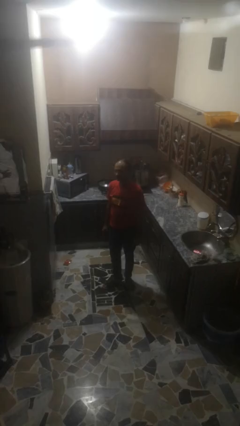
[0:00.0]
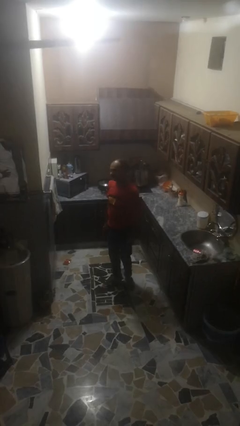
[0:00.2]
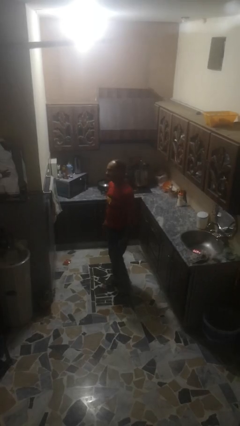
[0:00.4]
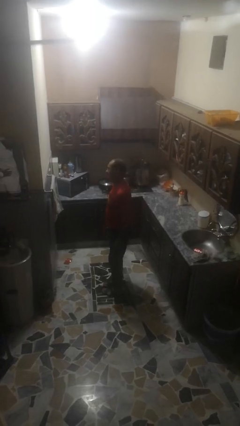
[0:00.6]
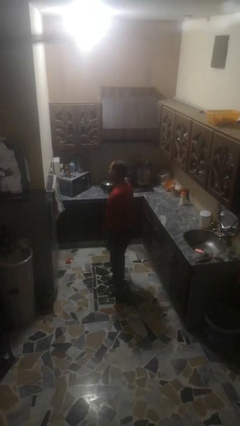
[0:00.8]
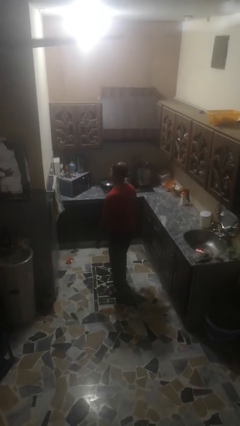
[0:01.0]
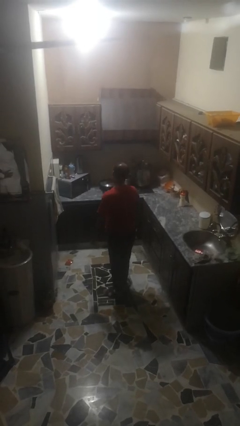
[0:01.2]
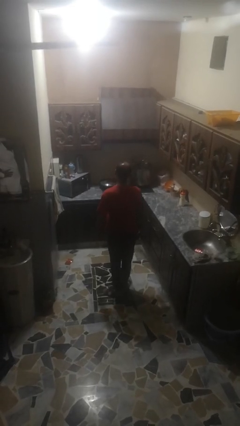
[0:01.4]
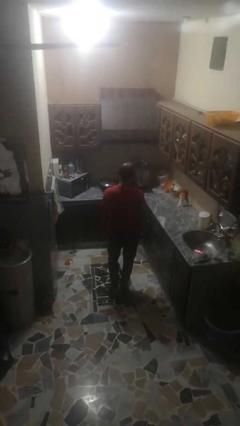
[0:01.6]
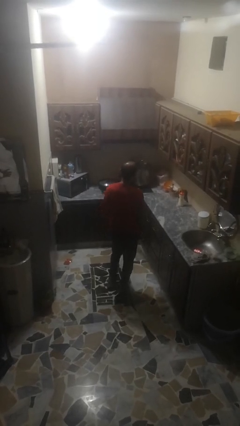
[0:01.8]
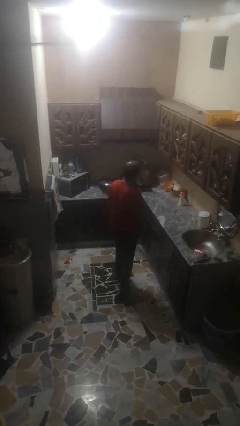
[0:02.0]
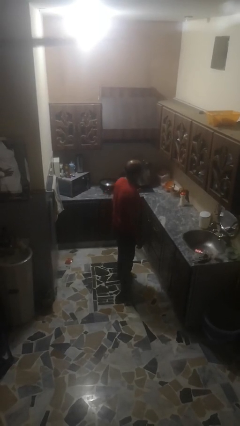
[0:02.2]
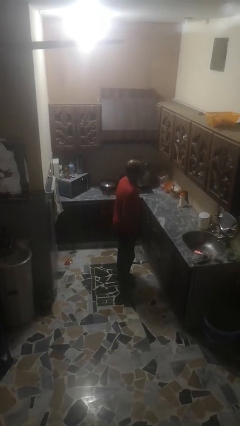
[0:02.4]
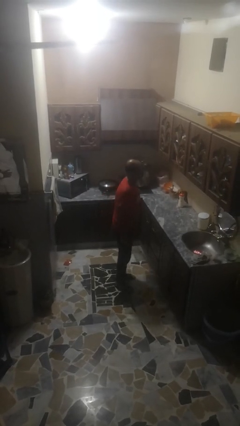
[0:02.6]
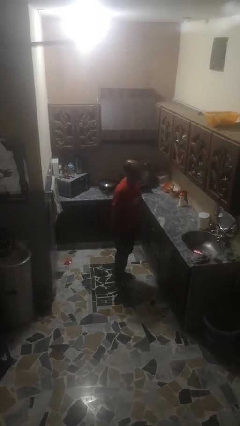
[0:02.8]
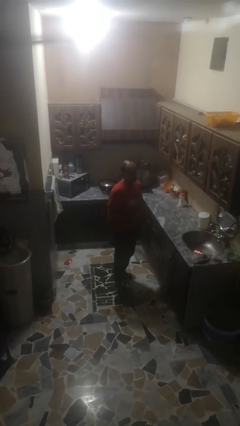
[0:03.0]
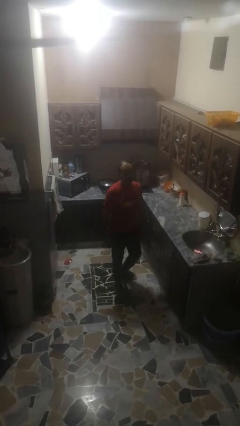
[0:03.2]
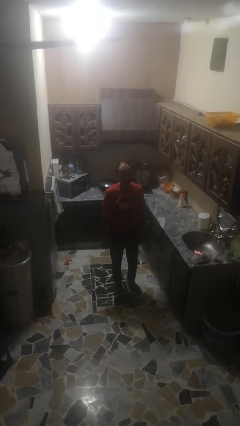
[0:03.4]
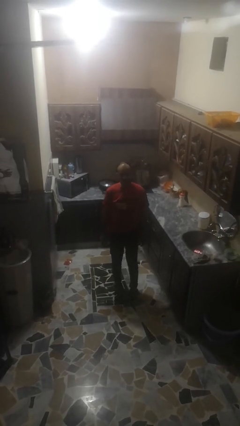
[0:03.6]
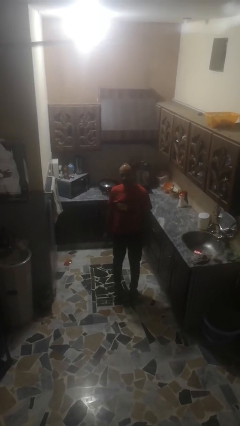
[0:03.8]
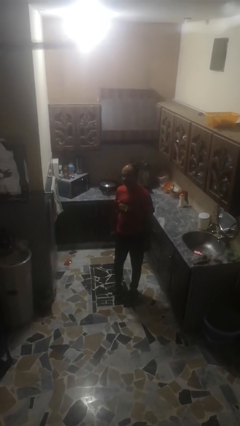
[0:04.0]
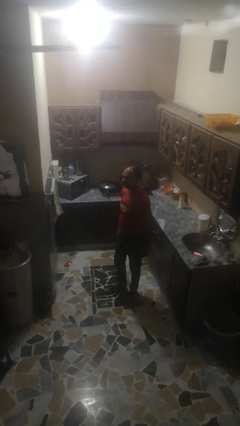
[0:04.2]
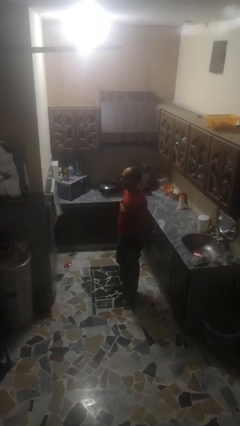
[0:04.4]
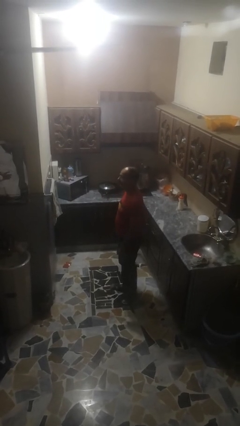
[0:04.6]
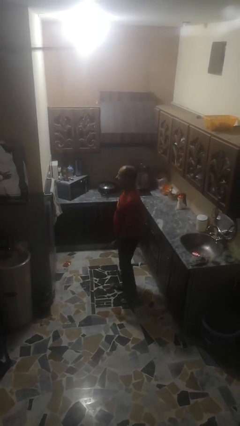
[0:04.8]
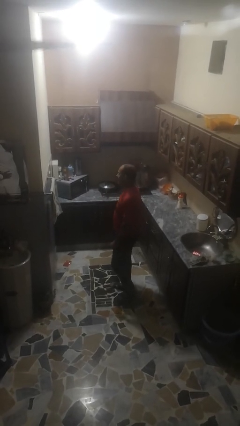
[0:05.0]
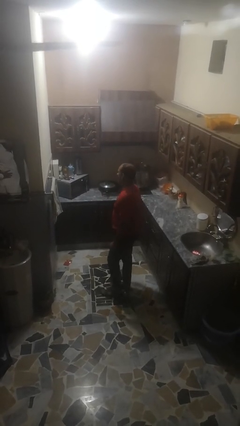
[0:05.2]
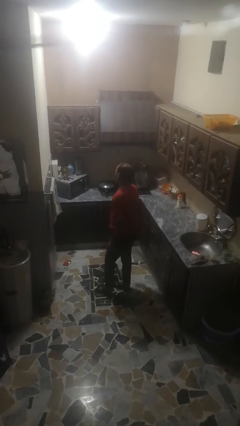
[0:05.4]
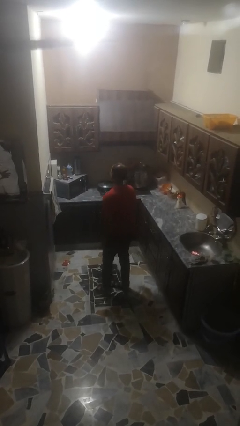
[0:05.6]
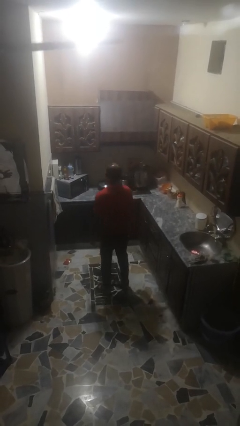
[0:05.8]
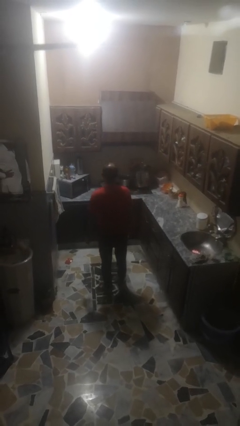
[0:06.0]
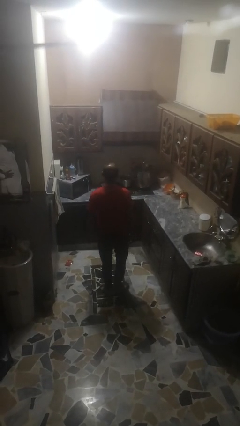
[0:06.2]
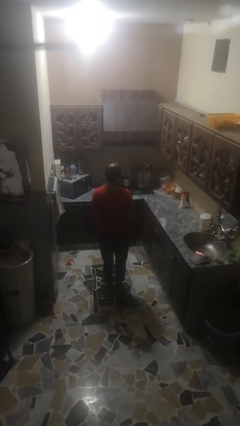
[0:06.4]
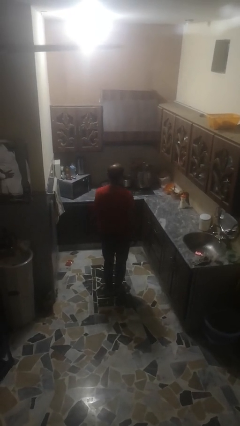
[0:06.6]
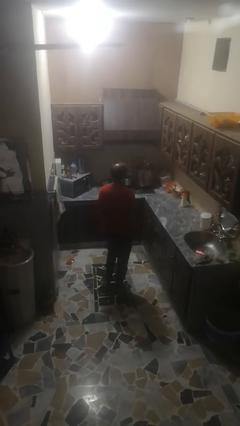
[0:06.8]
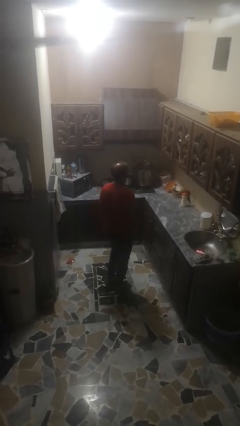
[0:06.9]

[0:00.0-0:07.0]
person twirls

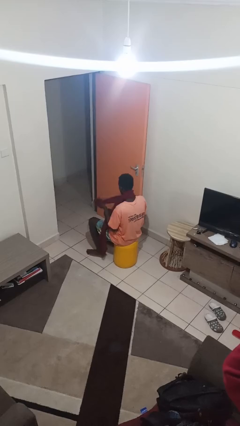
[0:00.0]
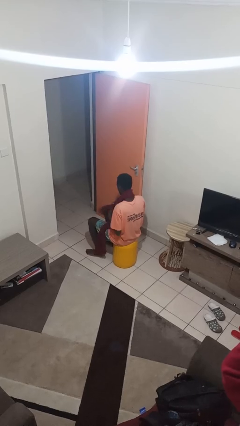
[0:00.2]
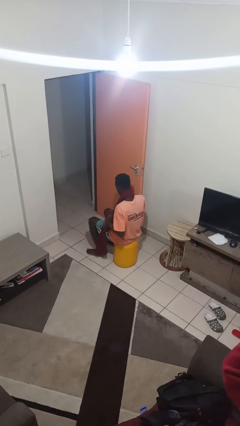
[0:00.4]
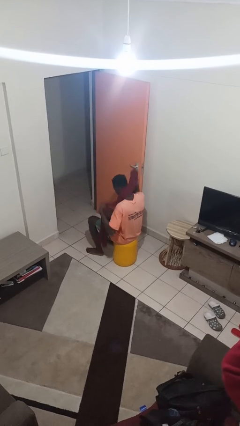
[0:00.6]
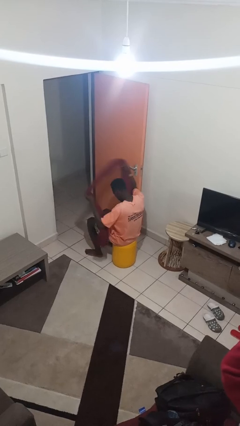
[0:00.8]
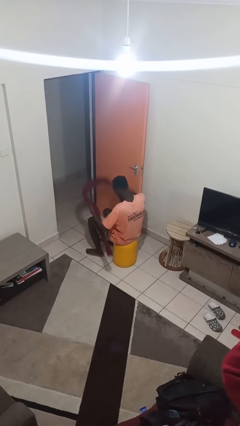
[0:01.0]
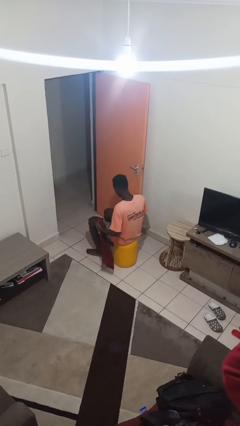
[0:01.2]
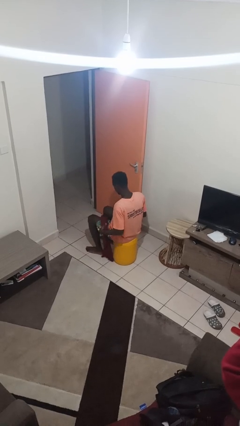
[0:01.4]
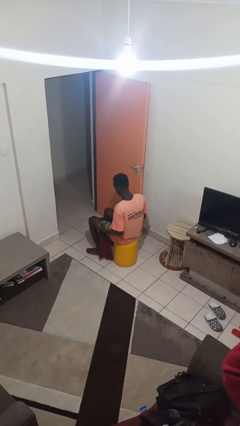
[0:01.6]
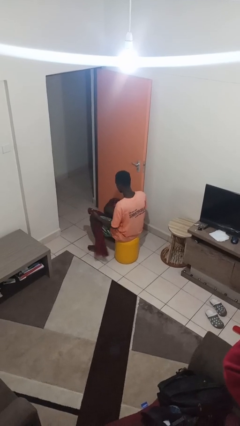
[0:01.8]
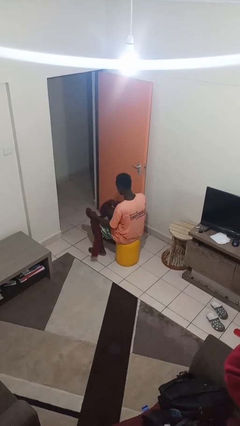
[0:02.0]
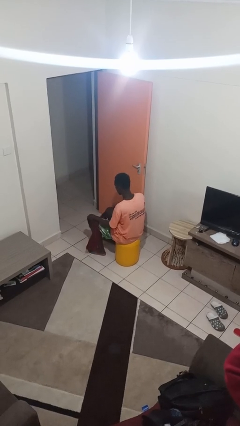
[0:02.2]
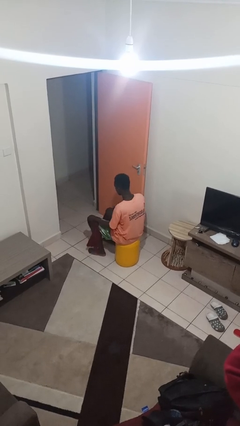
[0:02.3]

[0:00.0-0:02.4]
person takes off scarf

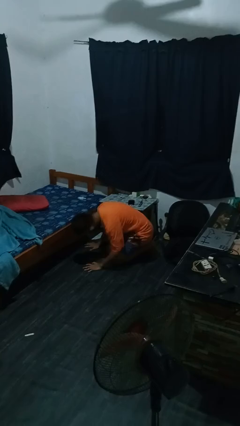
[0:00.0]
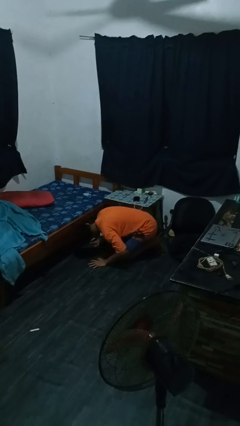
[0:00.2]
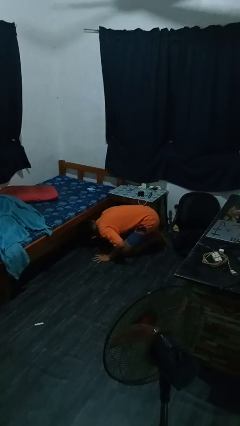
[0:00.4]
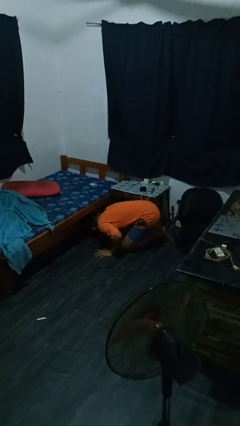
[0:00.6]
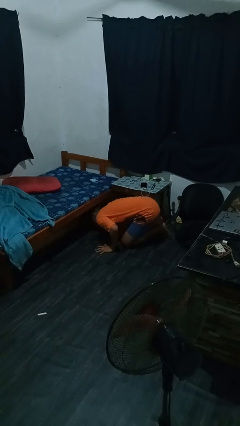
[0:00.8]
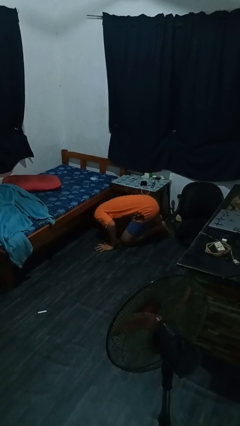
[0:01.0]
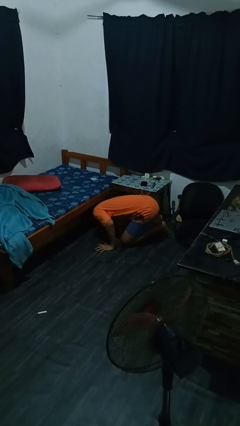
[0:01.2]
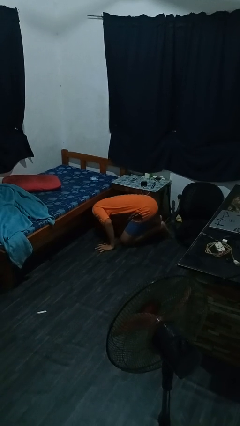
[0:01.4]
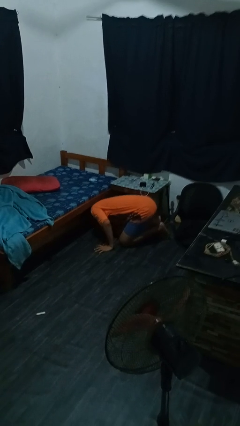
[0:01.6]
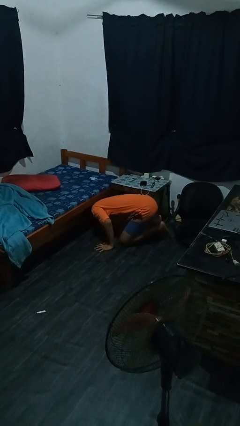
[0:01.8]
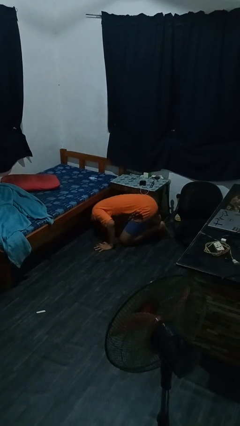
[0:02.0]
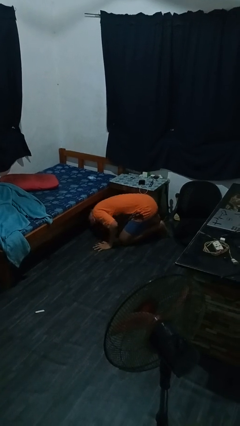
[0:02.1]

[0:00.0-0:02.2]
person searches under bed

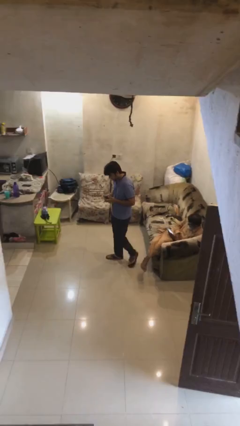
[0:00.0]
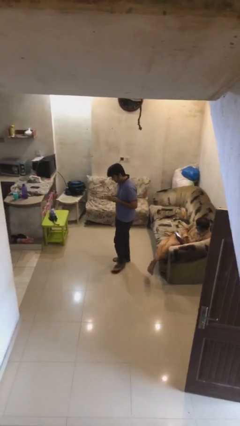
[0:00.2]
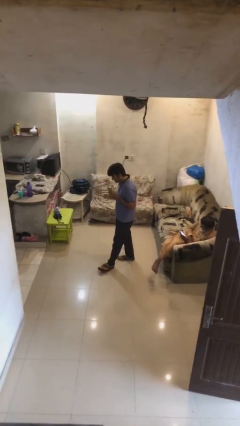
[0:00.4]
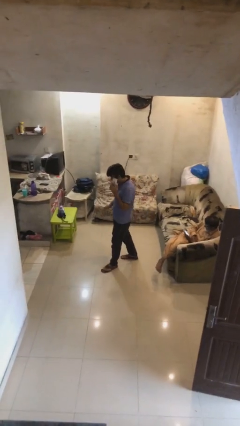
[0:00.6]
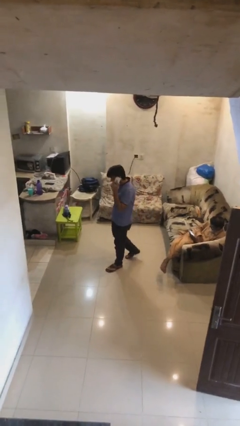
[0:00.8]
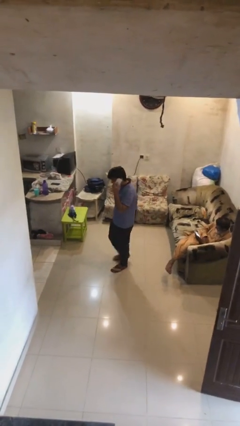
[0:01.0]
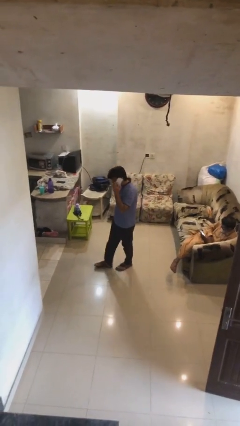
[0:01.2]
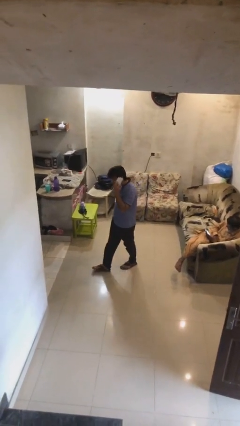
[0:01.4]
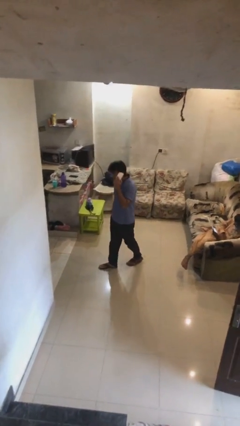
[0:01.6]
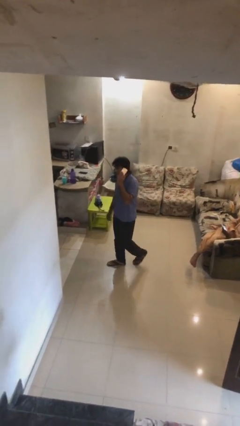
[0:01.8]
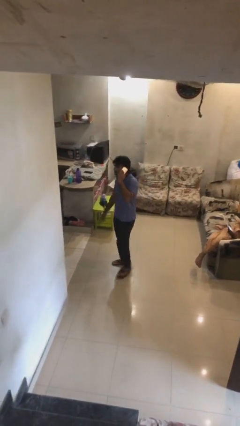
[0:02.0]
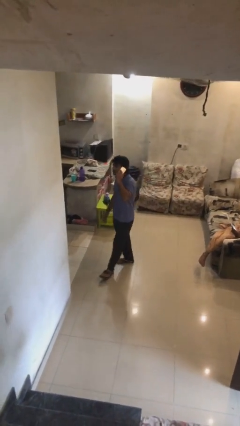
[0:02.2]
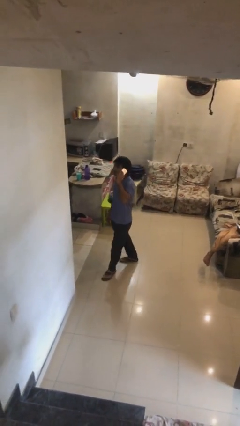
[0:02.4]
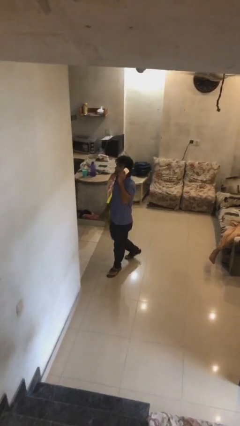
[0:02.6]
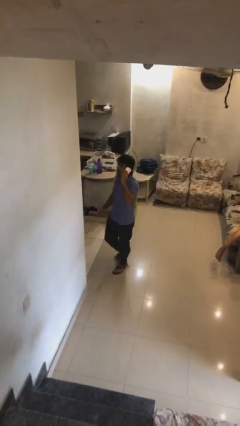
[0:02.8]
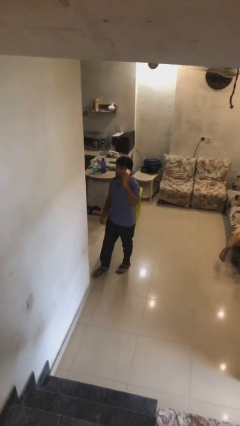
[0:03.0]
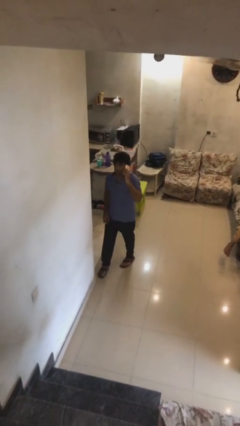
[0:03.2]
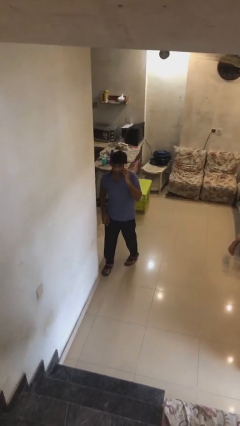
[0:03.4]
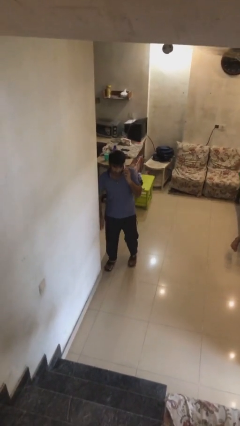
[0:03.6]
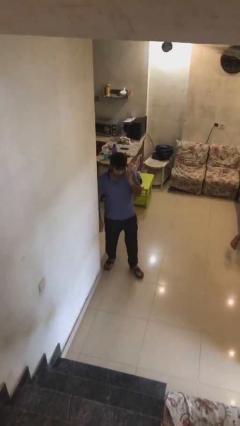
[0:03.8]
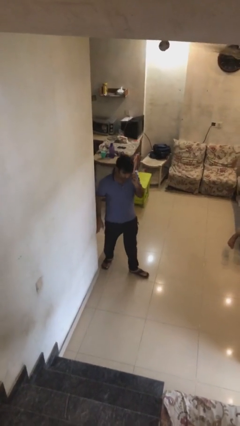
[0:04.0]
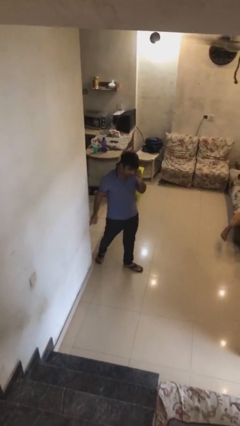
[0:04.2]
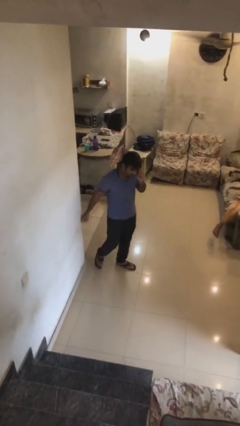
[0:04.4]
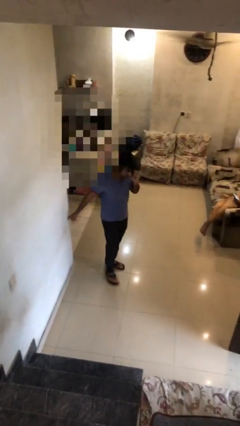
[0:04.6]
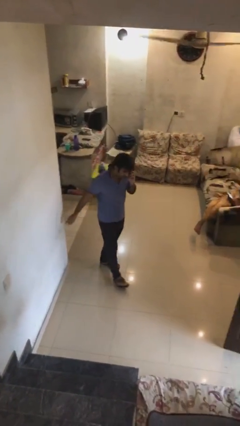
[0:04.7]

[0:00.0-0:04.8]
person talks on phone

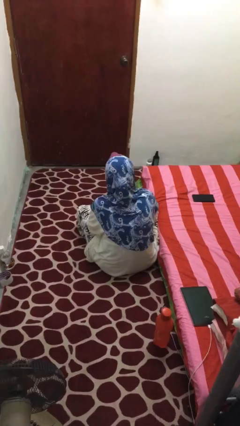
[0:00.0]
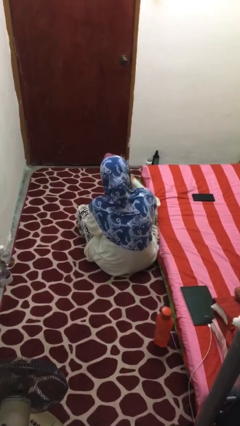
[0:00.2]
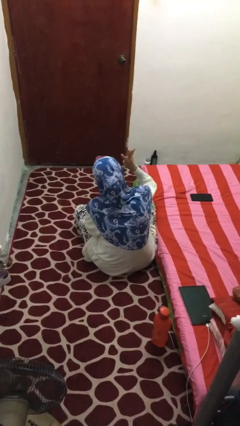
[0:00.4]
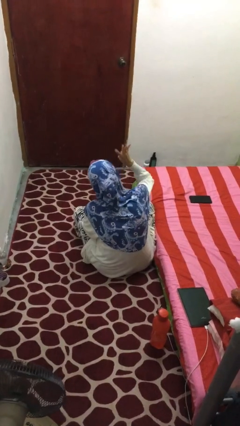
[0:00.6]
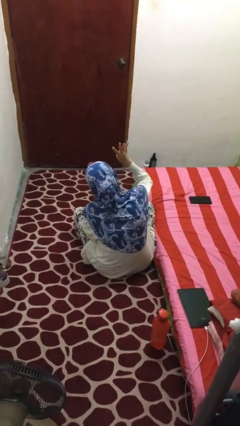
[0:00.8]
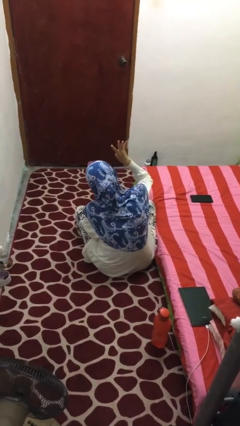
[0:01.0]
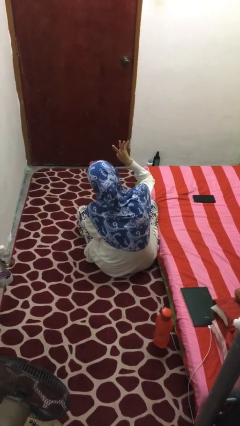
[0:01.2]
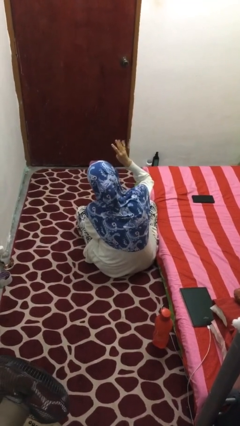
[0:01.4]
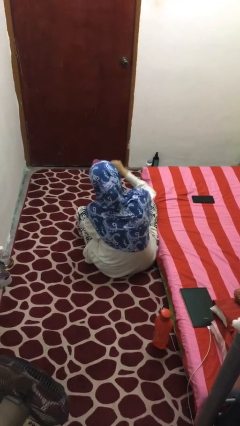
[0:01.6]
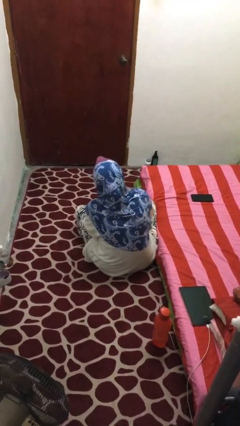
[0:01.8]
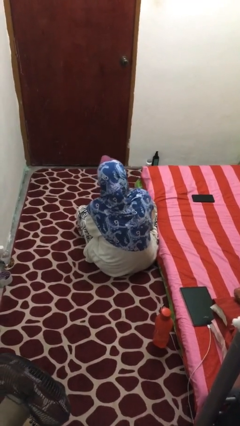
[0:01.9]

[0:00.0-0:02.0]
person gestures number four
